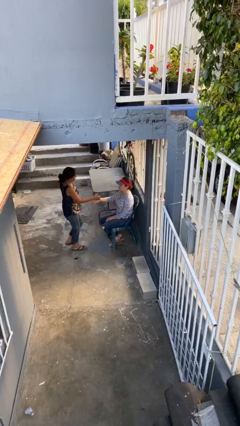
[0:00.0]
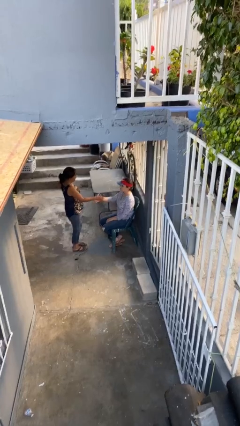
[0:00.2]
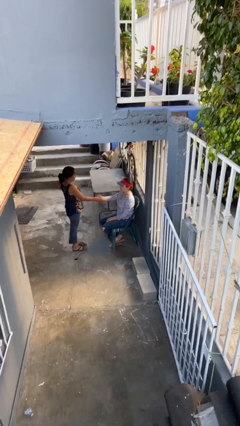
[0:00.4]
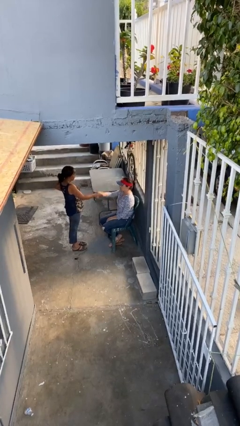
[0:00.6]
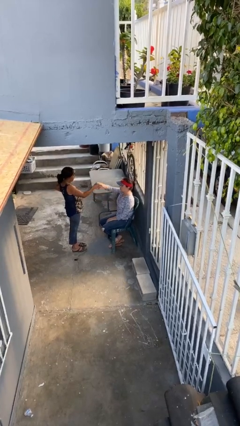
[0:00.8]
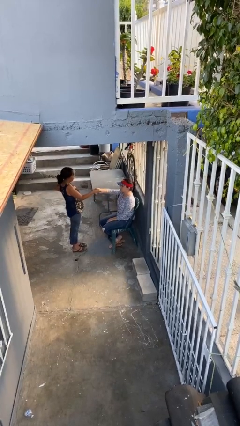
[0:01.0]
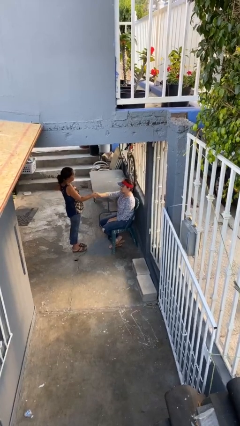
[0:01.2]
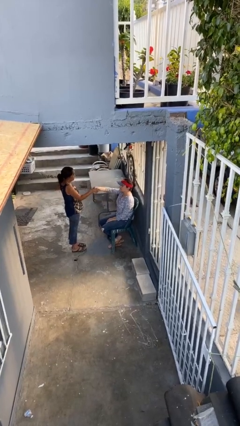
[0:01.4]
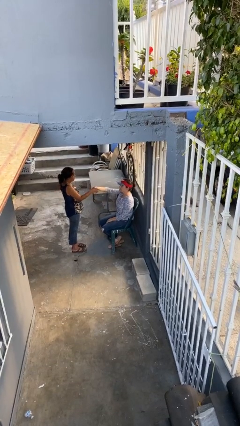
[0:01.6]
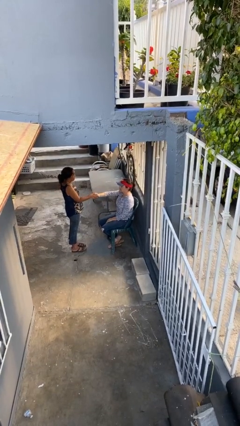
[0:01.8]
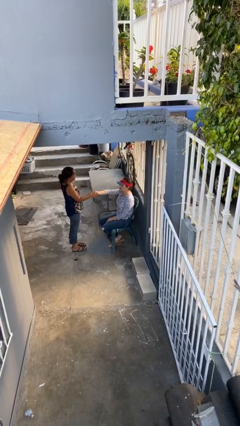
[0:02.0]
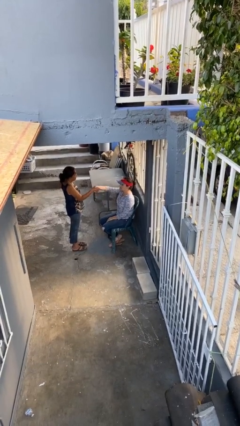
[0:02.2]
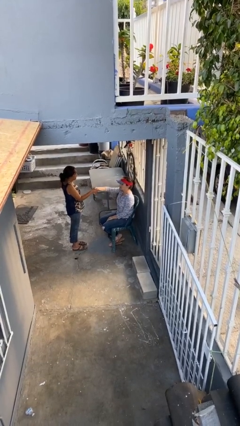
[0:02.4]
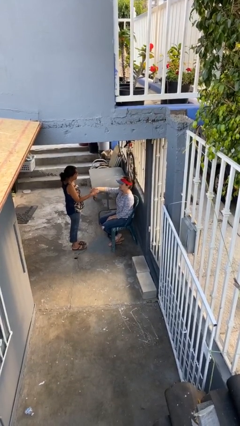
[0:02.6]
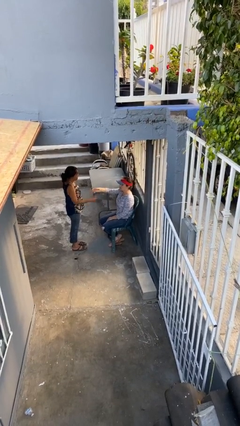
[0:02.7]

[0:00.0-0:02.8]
person shakes hand

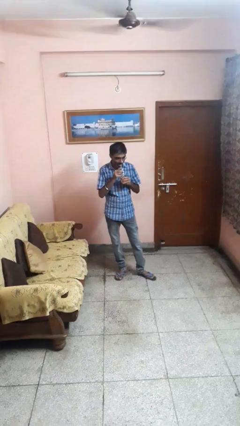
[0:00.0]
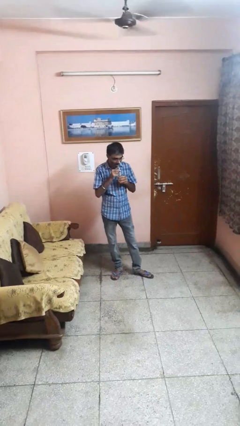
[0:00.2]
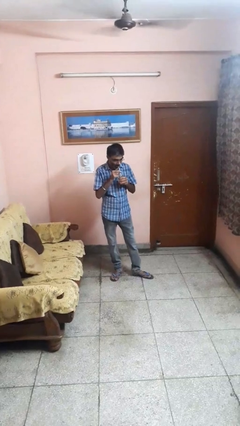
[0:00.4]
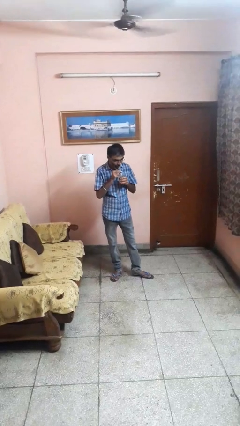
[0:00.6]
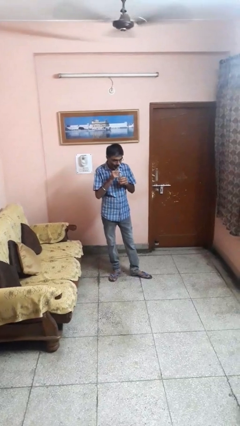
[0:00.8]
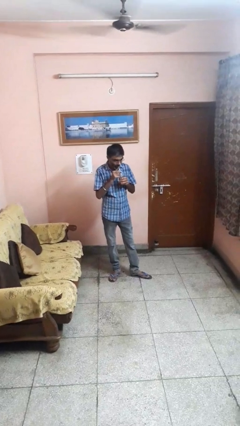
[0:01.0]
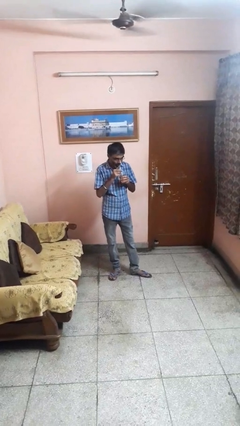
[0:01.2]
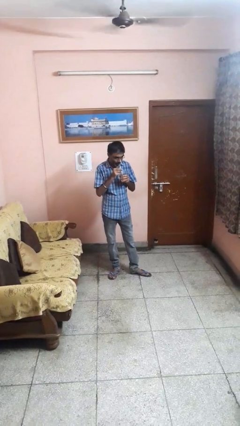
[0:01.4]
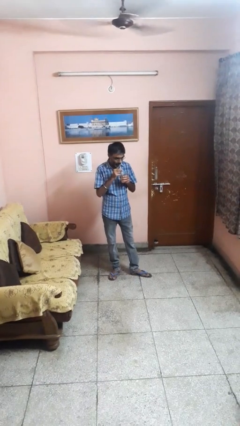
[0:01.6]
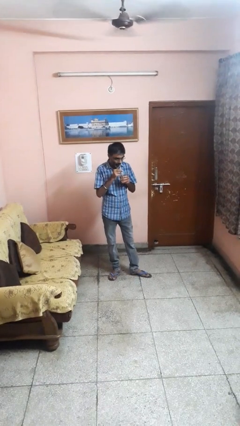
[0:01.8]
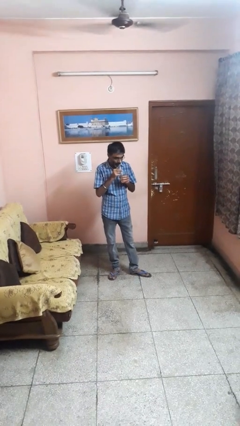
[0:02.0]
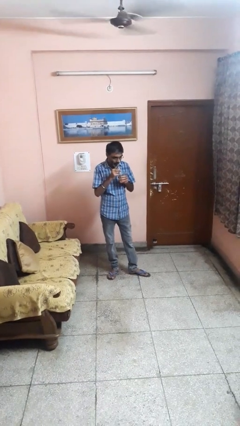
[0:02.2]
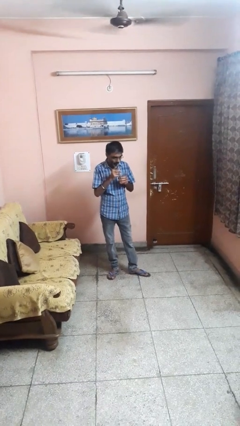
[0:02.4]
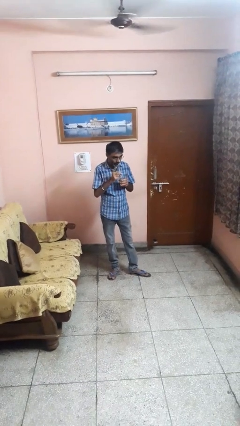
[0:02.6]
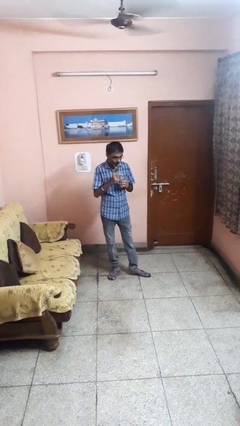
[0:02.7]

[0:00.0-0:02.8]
person drinks from straw

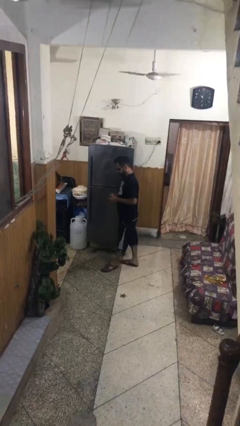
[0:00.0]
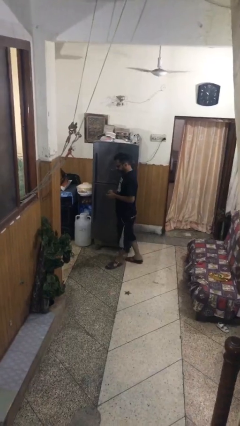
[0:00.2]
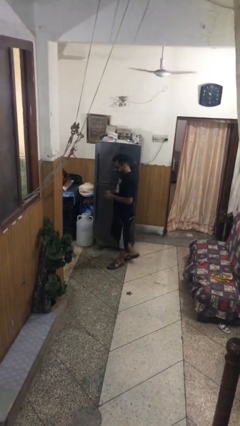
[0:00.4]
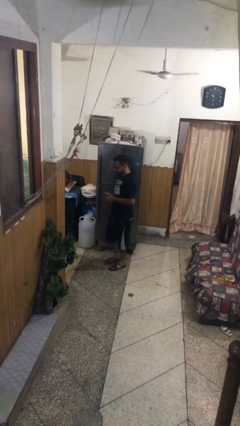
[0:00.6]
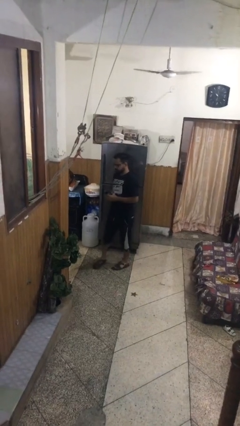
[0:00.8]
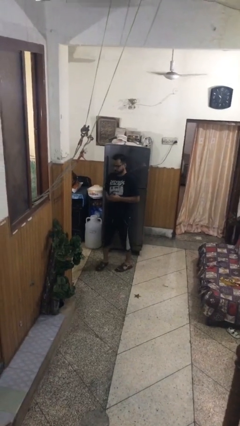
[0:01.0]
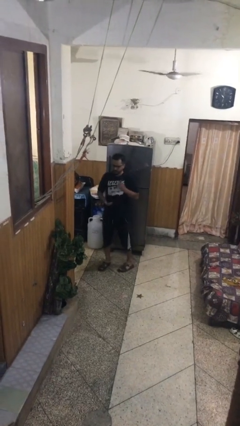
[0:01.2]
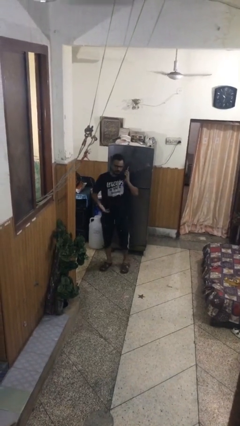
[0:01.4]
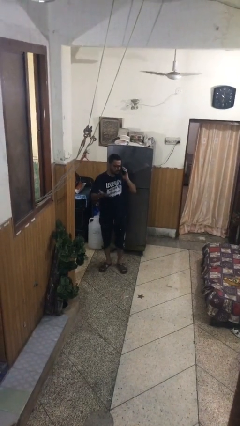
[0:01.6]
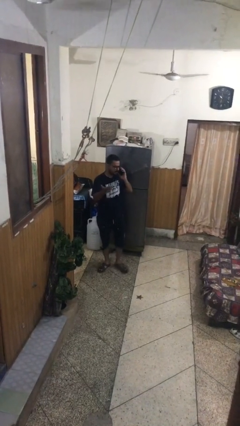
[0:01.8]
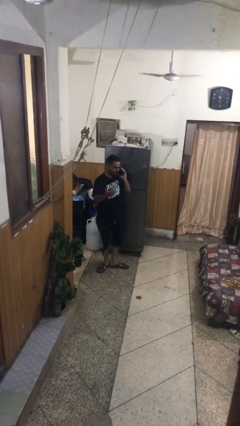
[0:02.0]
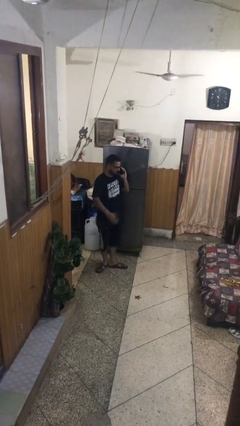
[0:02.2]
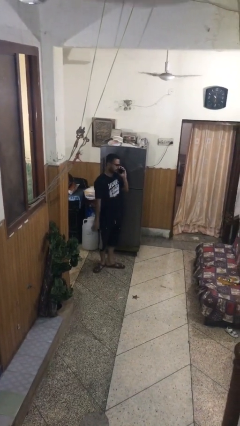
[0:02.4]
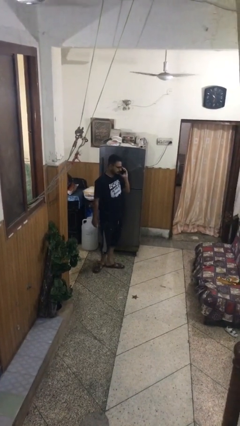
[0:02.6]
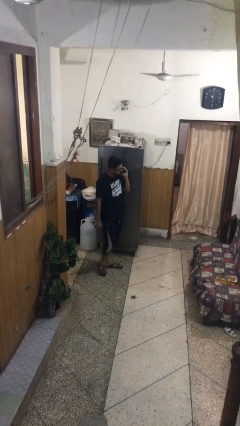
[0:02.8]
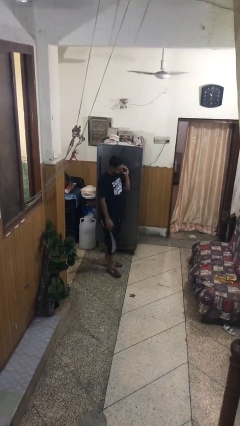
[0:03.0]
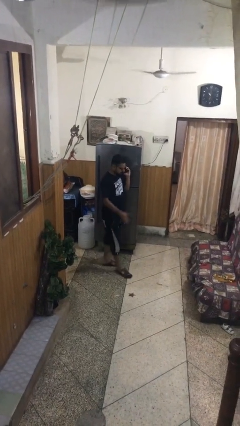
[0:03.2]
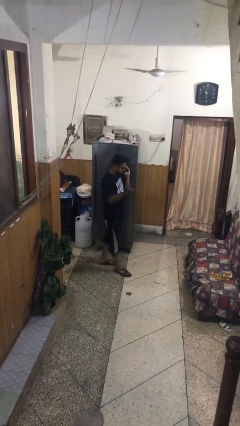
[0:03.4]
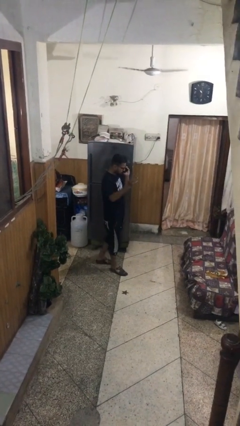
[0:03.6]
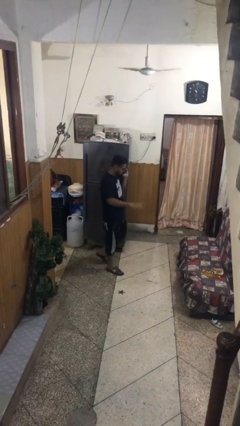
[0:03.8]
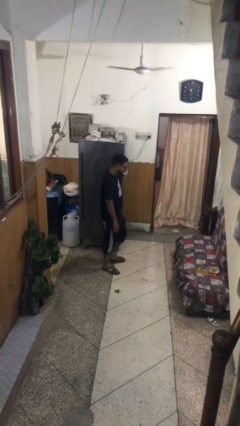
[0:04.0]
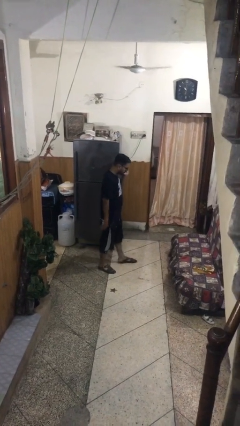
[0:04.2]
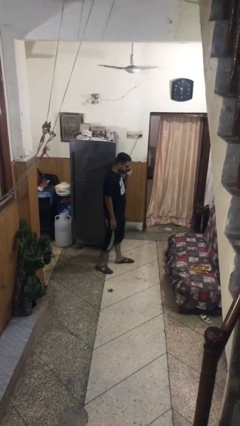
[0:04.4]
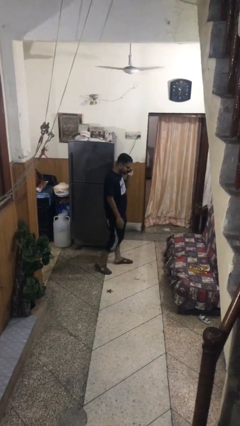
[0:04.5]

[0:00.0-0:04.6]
person talks on phone

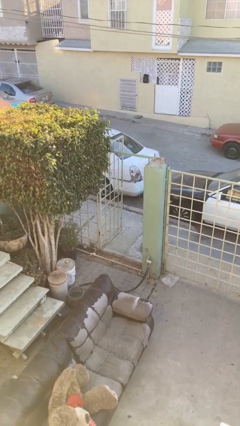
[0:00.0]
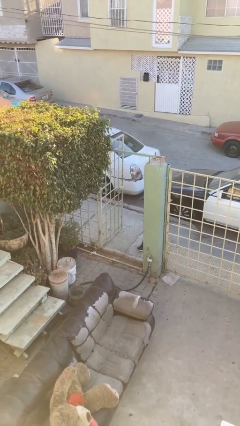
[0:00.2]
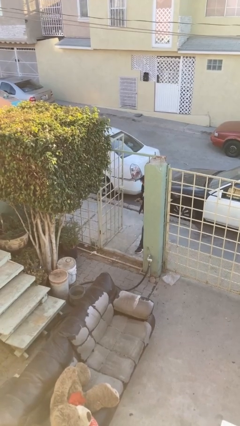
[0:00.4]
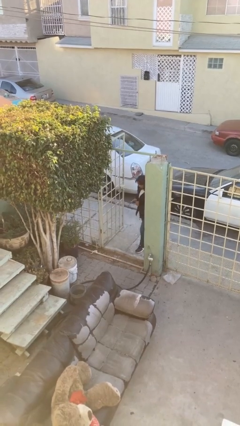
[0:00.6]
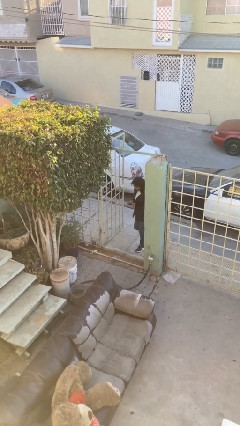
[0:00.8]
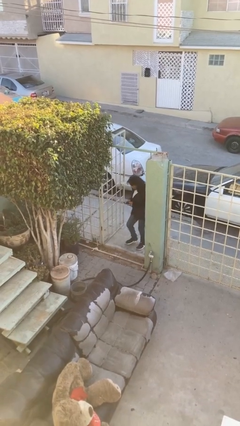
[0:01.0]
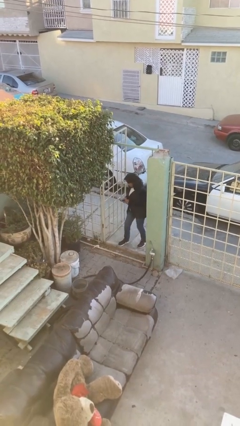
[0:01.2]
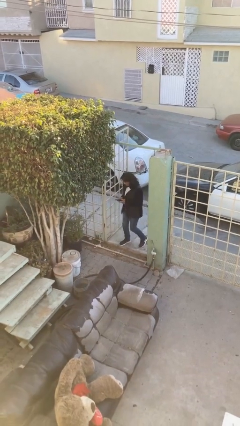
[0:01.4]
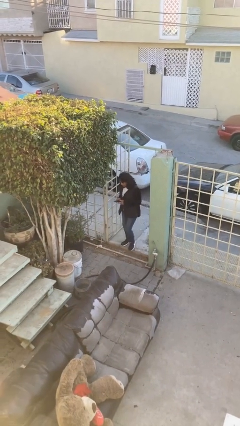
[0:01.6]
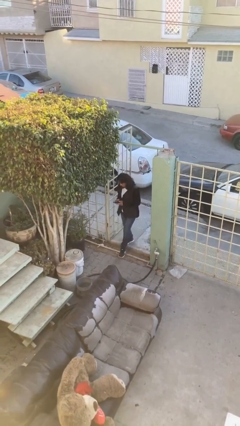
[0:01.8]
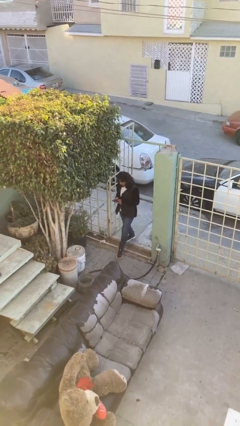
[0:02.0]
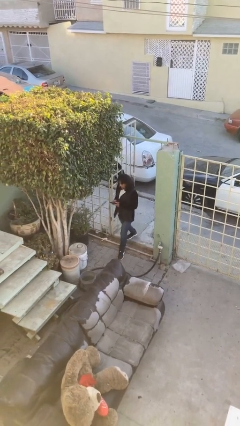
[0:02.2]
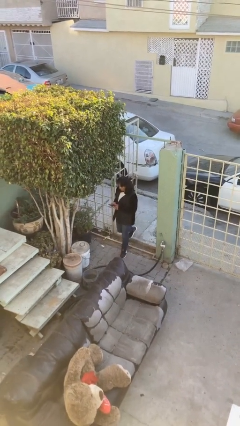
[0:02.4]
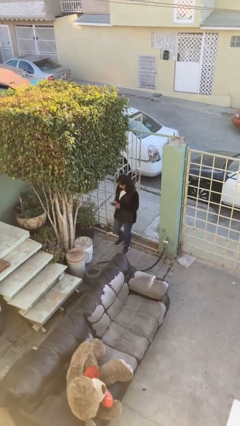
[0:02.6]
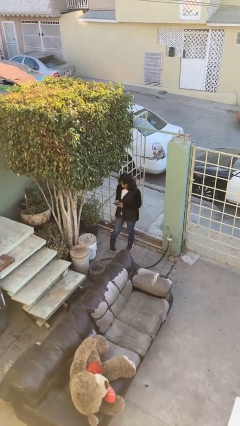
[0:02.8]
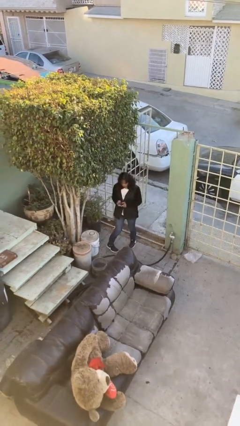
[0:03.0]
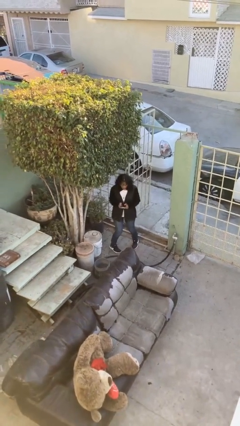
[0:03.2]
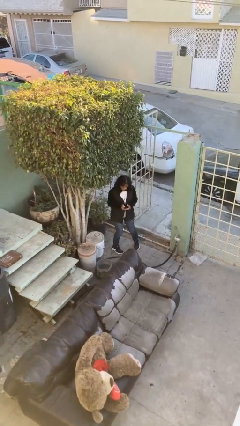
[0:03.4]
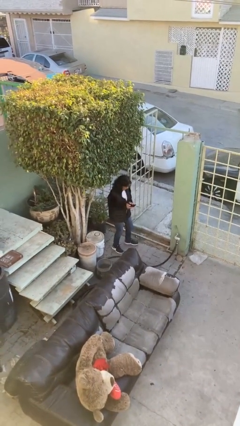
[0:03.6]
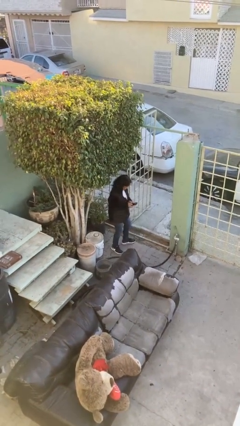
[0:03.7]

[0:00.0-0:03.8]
person enters scene through structure

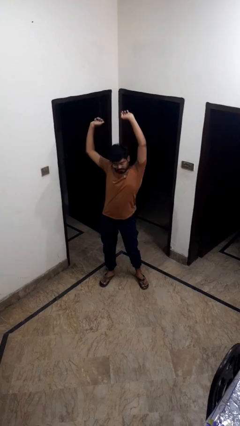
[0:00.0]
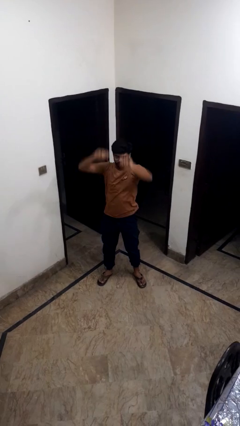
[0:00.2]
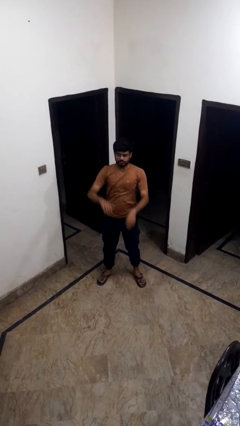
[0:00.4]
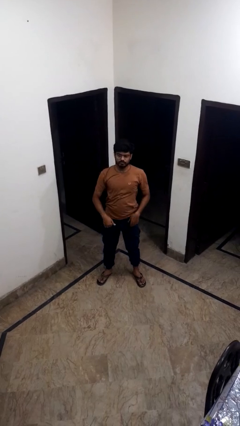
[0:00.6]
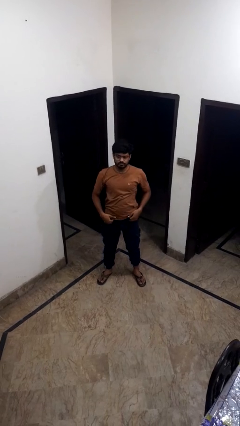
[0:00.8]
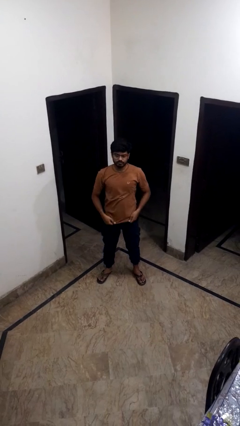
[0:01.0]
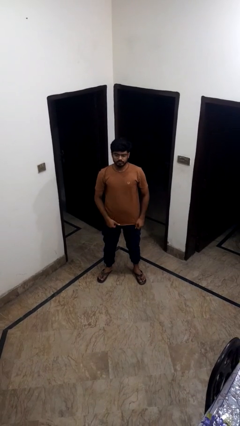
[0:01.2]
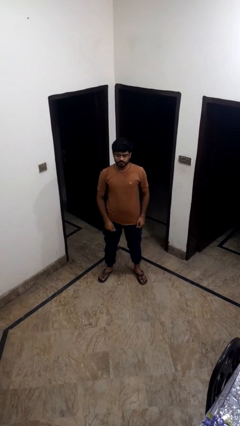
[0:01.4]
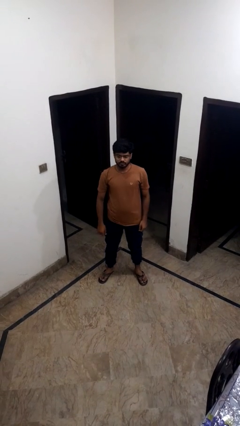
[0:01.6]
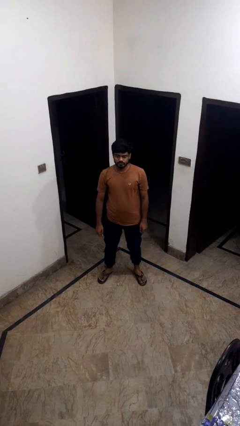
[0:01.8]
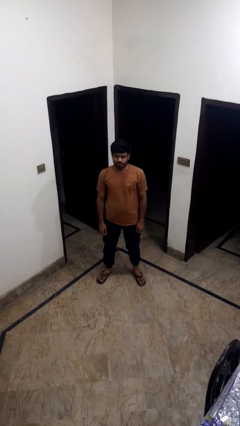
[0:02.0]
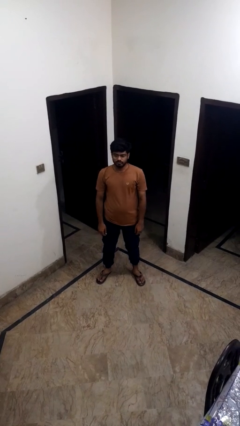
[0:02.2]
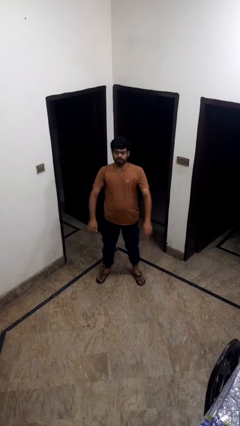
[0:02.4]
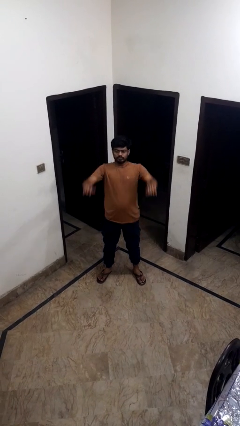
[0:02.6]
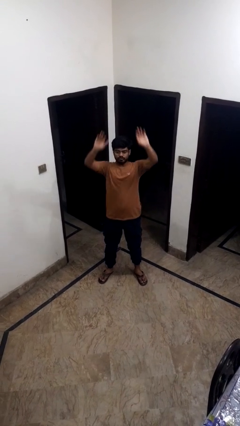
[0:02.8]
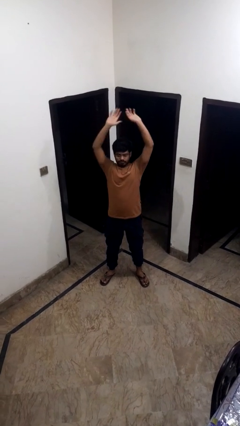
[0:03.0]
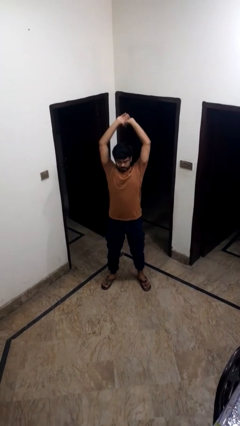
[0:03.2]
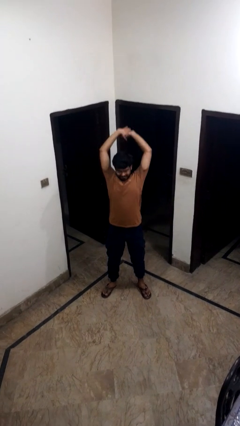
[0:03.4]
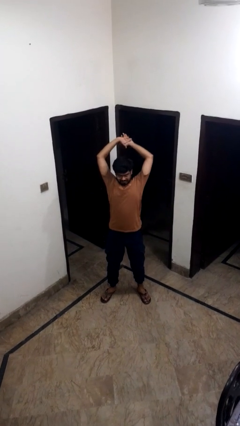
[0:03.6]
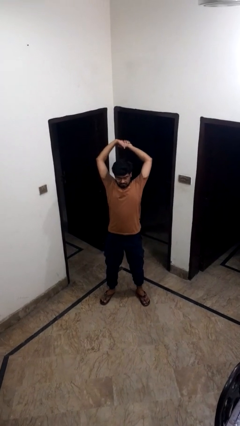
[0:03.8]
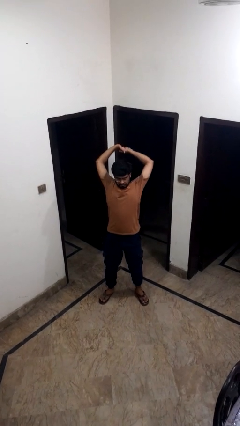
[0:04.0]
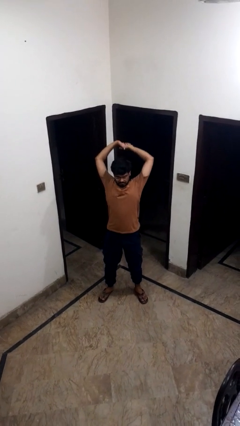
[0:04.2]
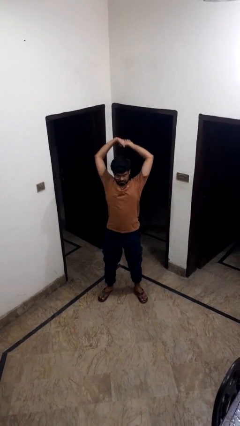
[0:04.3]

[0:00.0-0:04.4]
person ties jacket around waist
